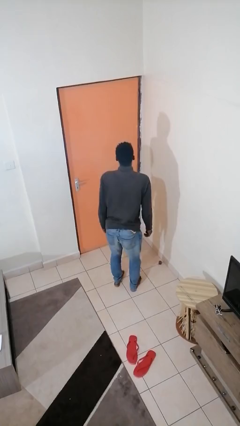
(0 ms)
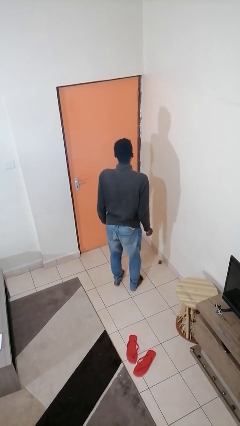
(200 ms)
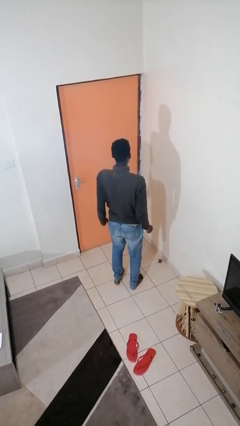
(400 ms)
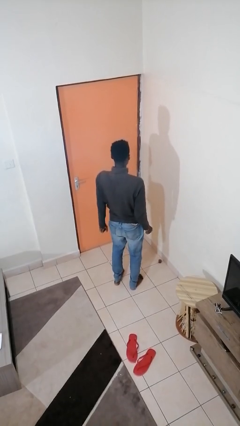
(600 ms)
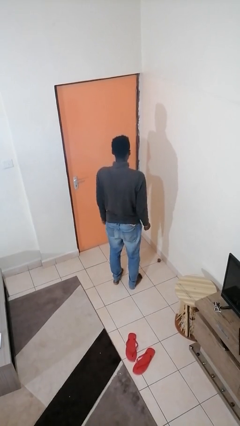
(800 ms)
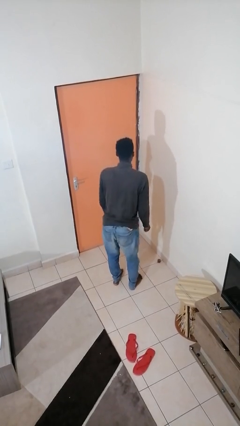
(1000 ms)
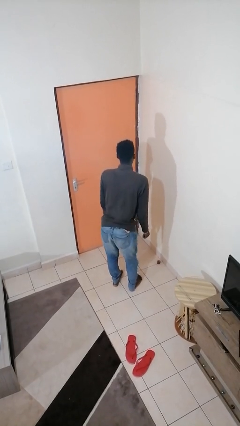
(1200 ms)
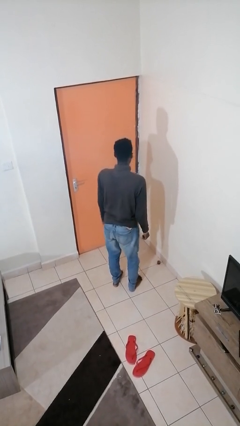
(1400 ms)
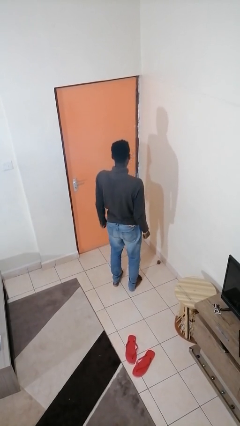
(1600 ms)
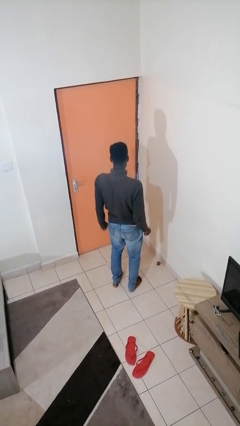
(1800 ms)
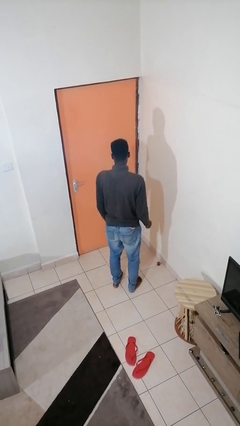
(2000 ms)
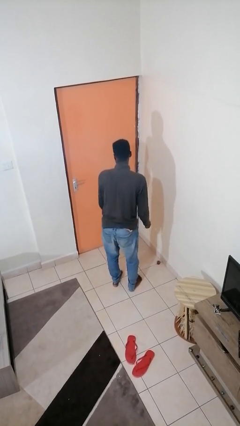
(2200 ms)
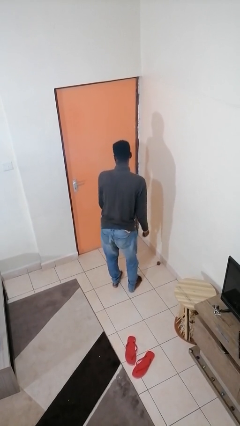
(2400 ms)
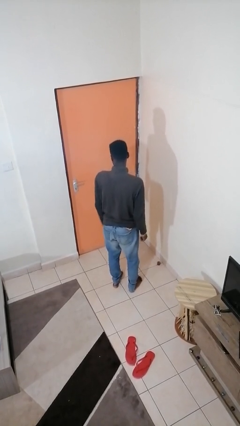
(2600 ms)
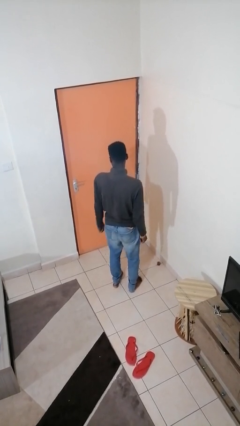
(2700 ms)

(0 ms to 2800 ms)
person wiggles hips

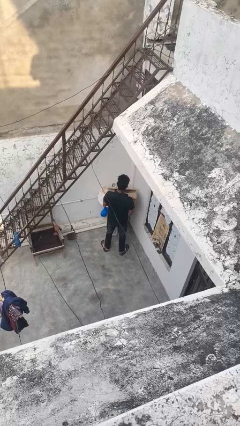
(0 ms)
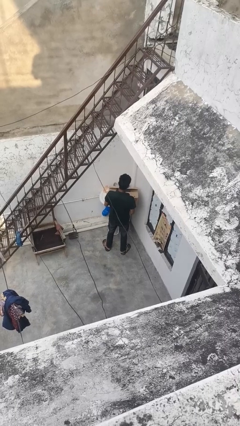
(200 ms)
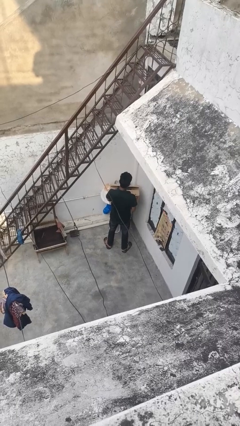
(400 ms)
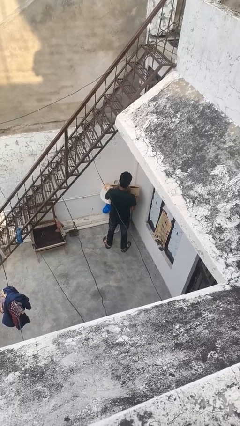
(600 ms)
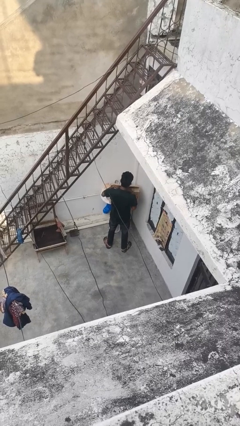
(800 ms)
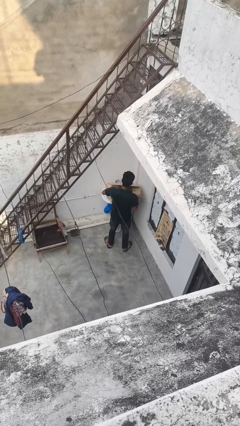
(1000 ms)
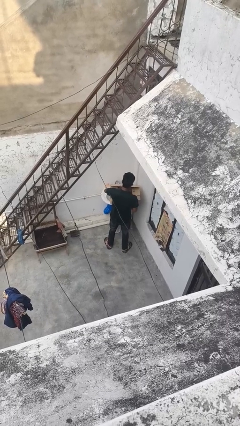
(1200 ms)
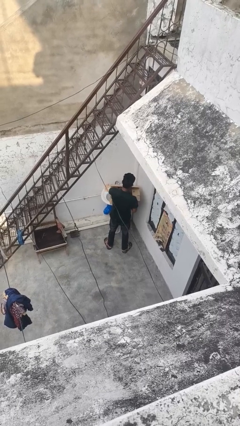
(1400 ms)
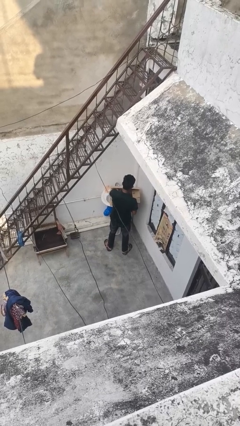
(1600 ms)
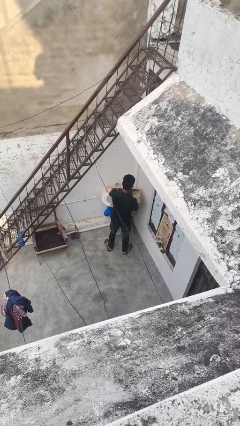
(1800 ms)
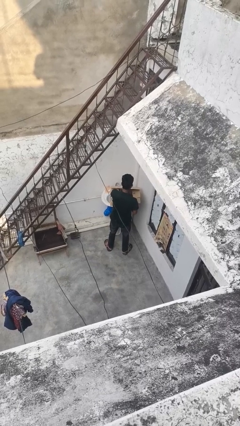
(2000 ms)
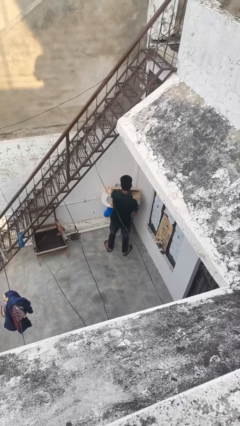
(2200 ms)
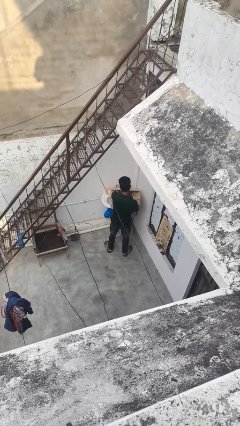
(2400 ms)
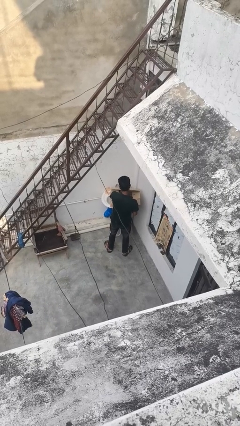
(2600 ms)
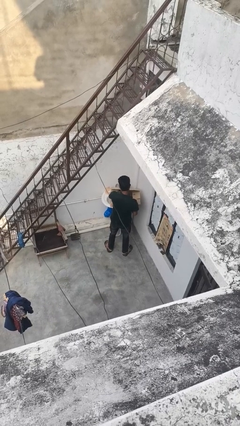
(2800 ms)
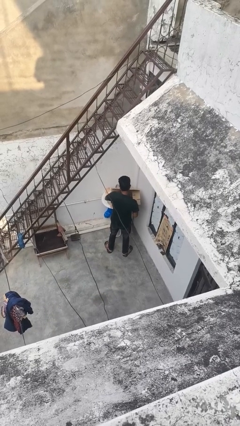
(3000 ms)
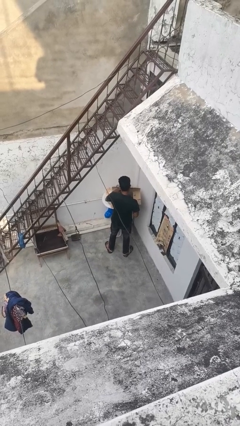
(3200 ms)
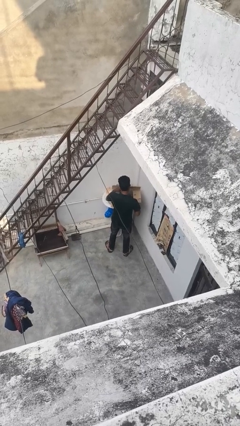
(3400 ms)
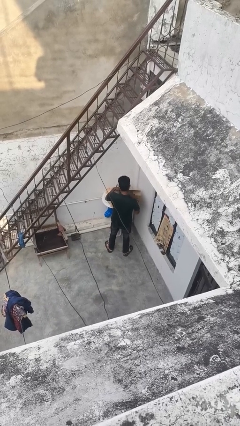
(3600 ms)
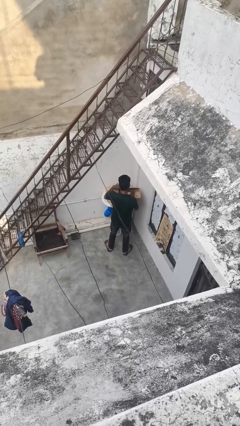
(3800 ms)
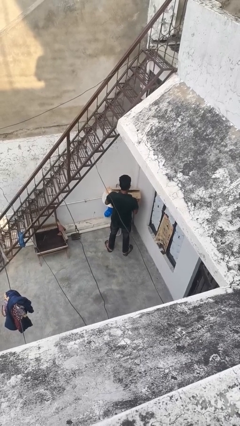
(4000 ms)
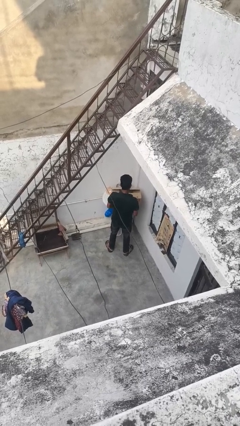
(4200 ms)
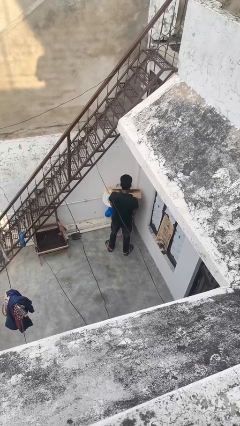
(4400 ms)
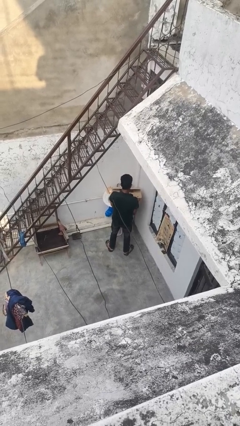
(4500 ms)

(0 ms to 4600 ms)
person searches in box

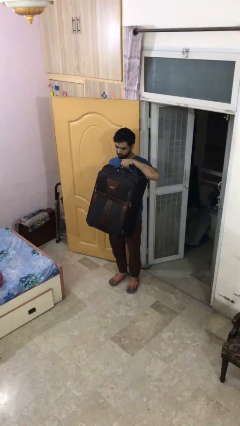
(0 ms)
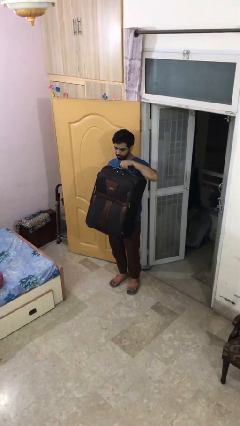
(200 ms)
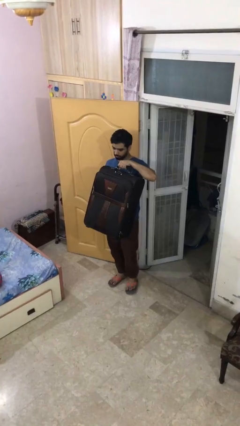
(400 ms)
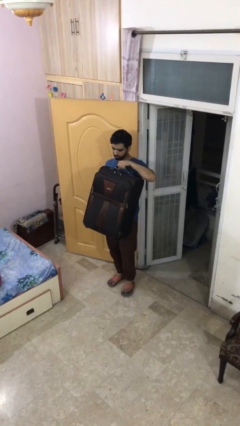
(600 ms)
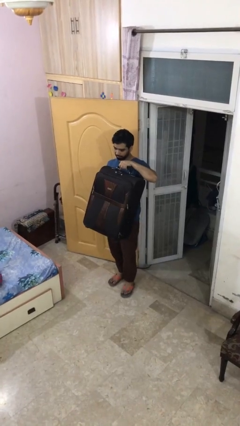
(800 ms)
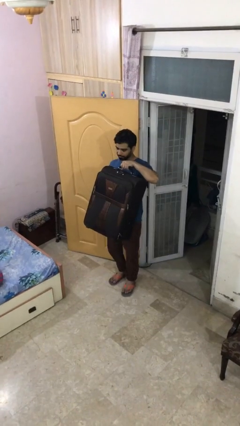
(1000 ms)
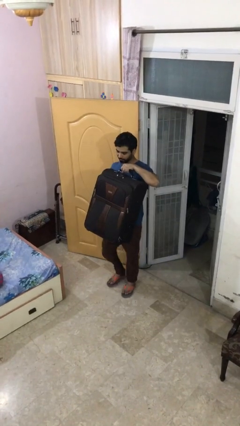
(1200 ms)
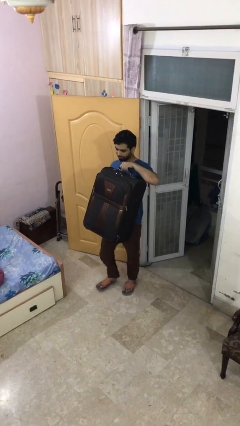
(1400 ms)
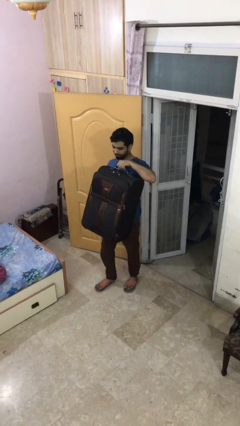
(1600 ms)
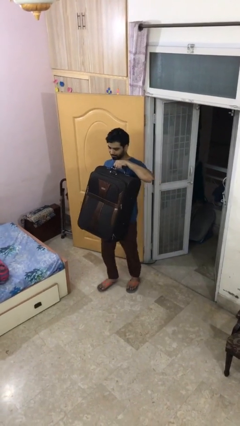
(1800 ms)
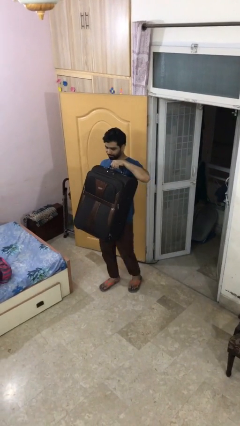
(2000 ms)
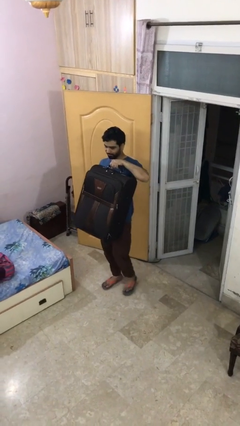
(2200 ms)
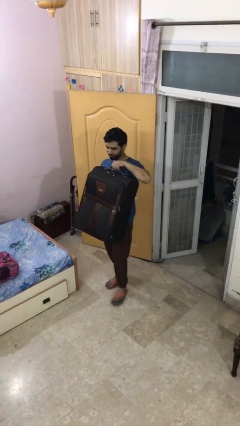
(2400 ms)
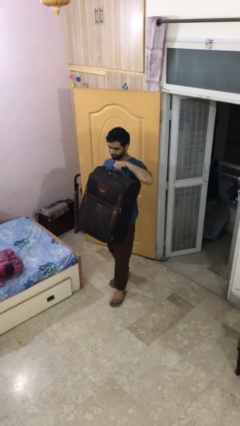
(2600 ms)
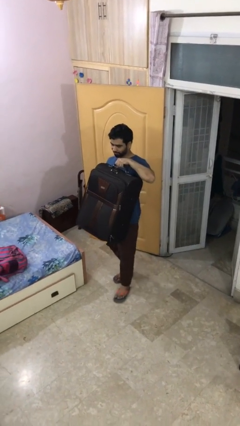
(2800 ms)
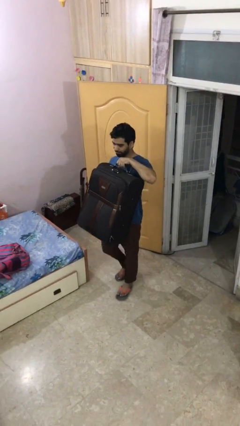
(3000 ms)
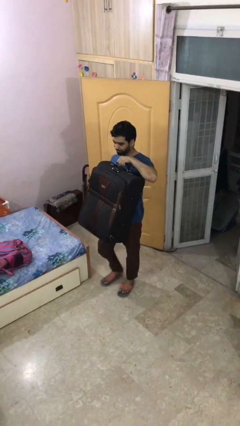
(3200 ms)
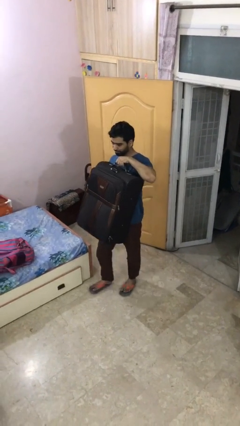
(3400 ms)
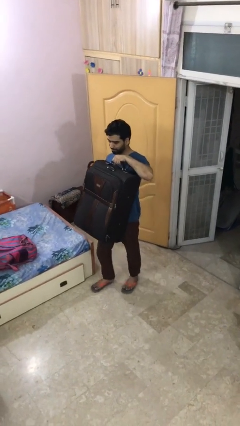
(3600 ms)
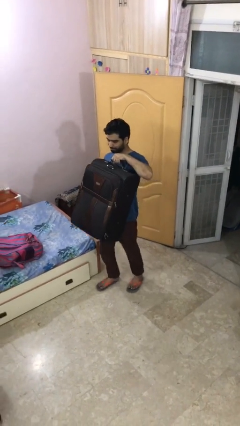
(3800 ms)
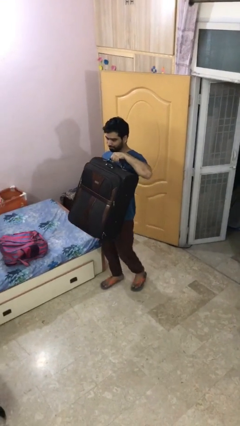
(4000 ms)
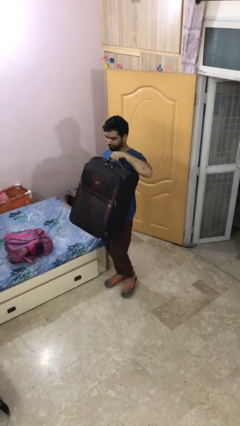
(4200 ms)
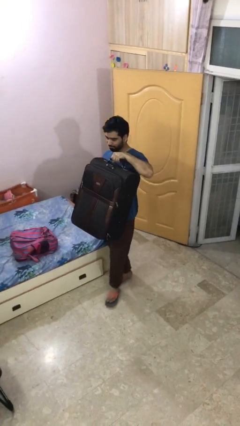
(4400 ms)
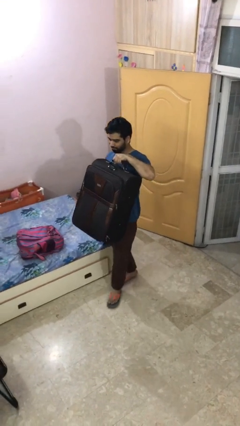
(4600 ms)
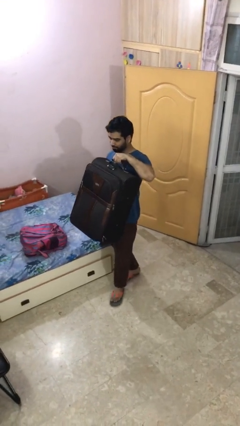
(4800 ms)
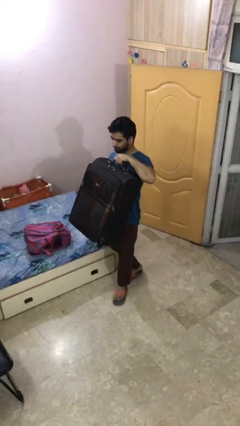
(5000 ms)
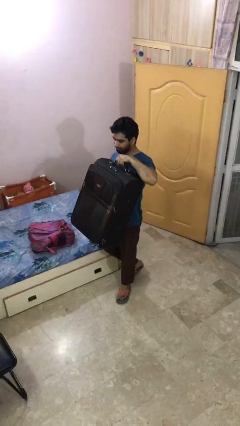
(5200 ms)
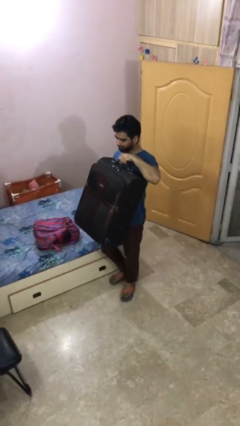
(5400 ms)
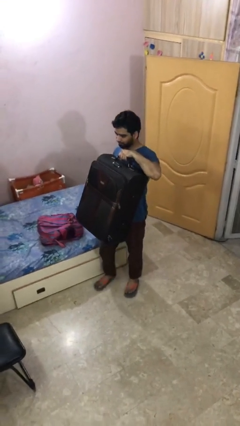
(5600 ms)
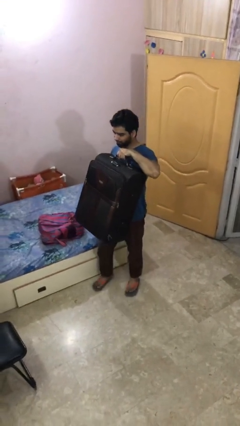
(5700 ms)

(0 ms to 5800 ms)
person carries heavy object

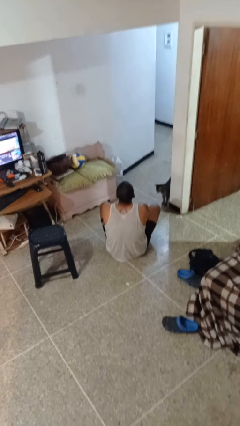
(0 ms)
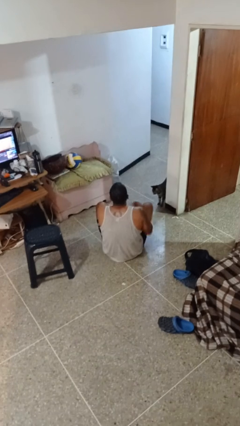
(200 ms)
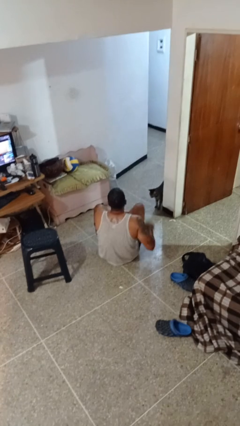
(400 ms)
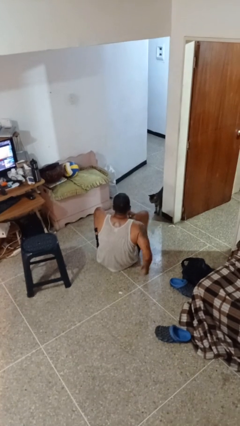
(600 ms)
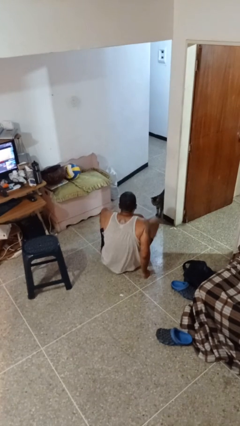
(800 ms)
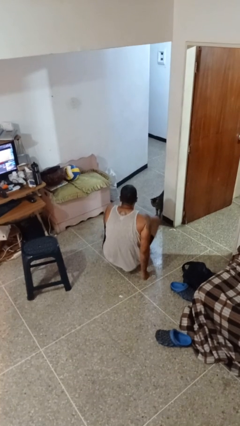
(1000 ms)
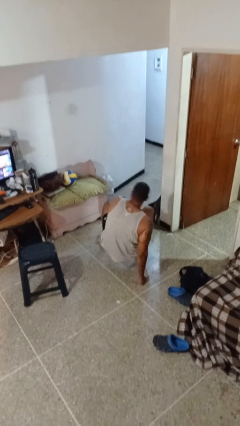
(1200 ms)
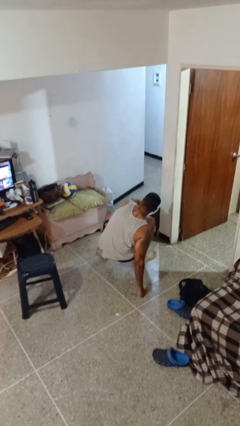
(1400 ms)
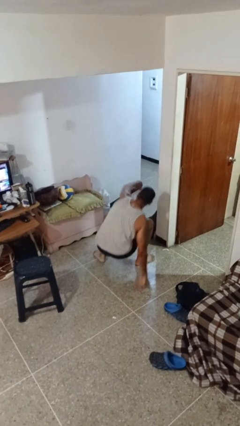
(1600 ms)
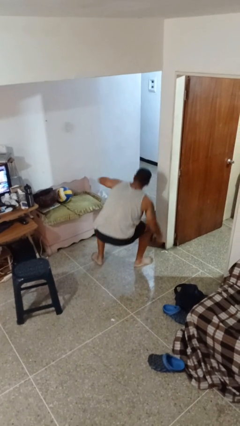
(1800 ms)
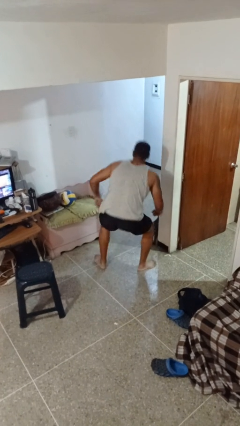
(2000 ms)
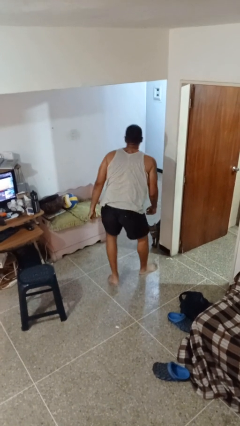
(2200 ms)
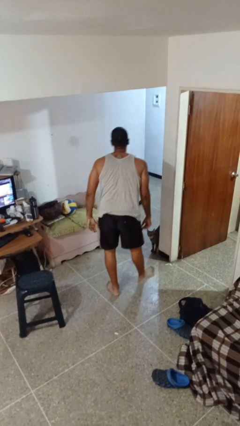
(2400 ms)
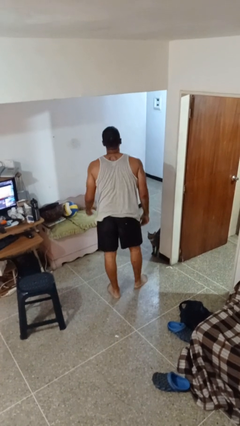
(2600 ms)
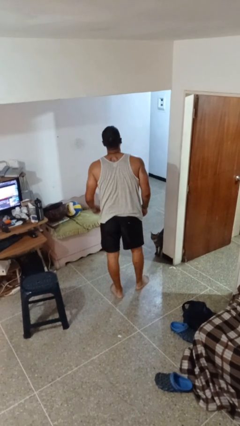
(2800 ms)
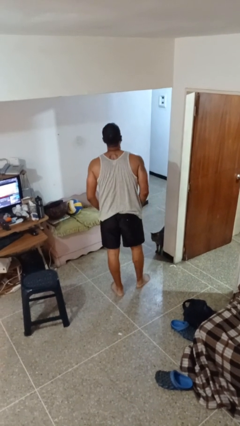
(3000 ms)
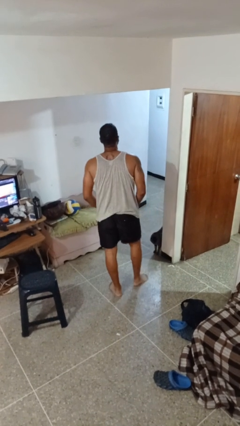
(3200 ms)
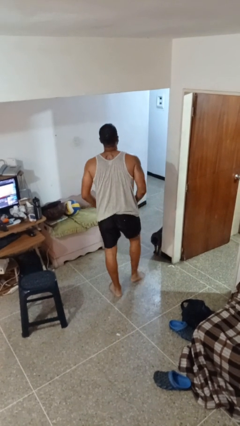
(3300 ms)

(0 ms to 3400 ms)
person stands up from floor

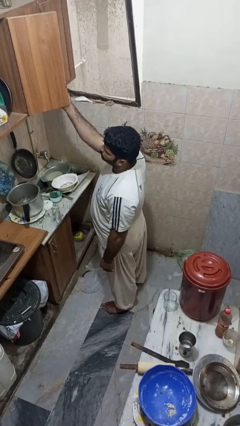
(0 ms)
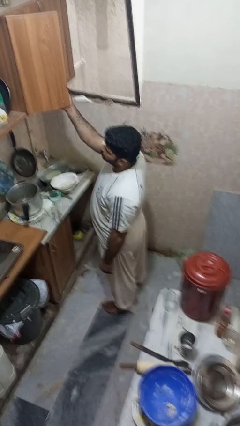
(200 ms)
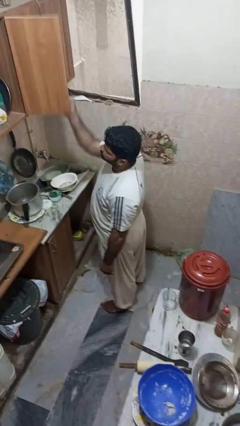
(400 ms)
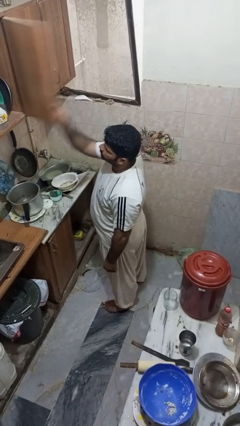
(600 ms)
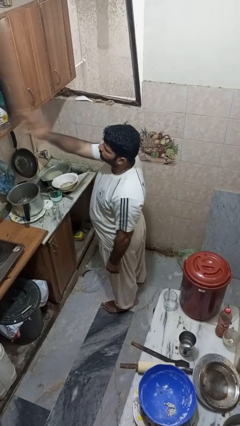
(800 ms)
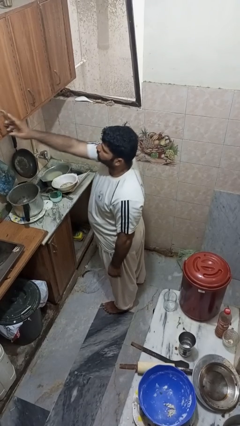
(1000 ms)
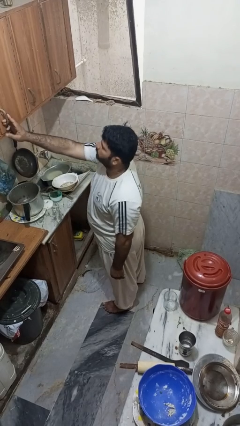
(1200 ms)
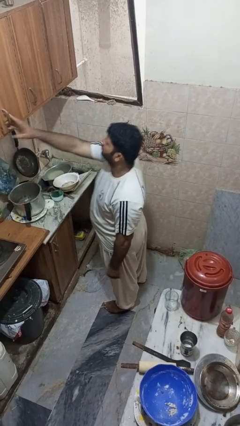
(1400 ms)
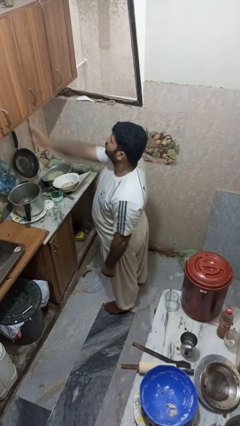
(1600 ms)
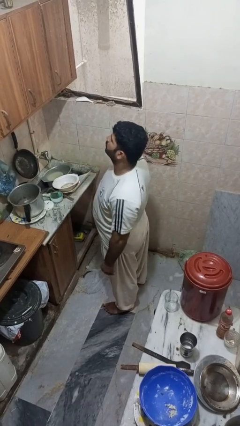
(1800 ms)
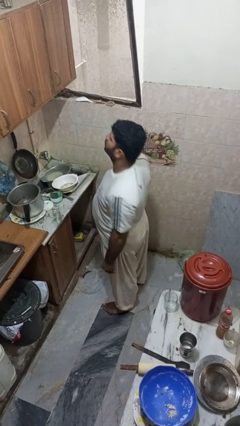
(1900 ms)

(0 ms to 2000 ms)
person closes cabinet
